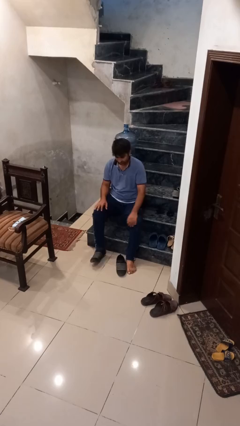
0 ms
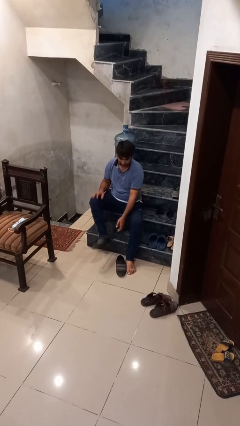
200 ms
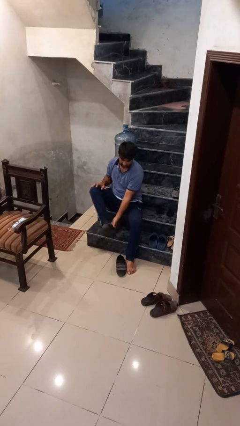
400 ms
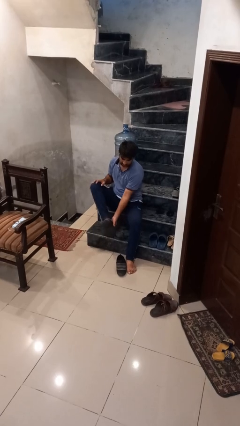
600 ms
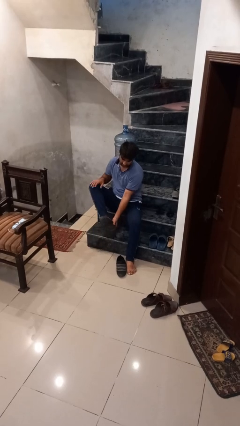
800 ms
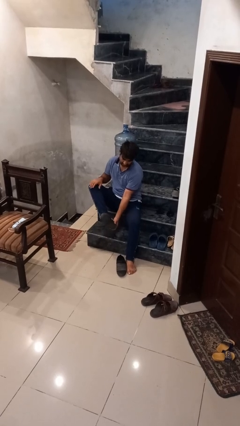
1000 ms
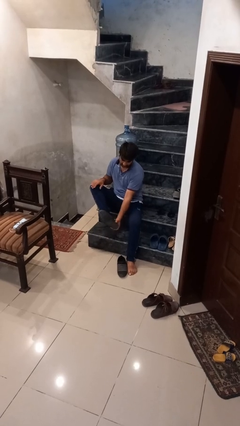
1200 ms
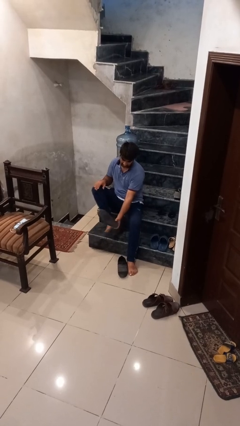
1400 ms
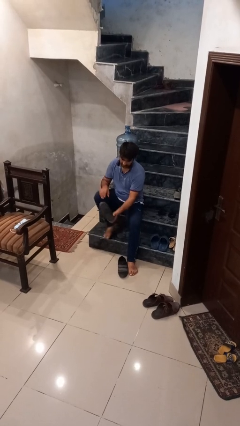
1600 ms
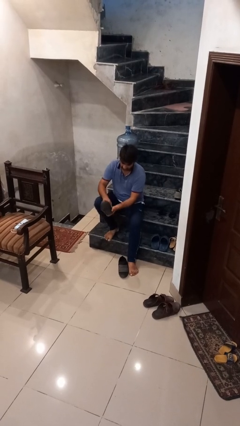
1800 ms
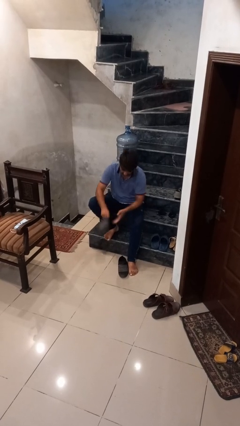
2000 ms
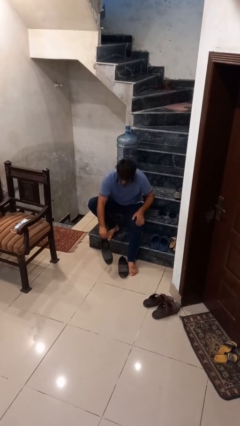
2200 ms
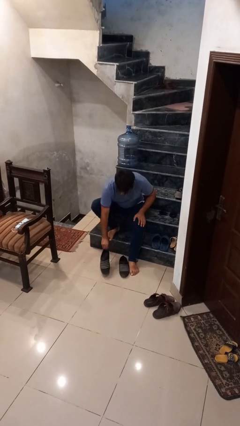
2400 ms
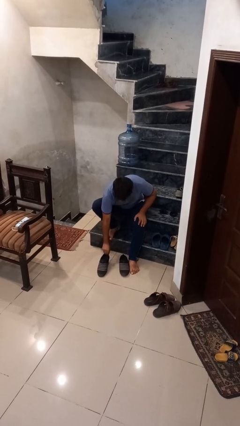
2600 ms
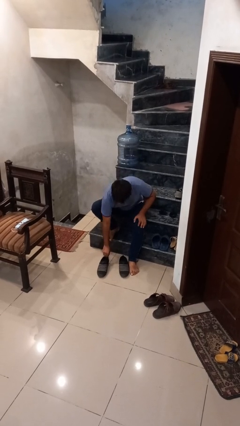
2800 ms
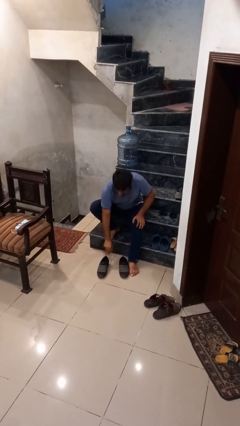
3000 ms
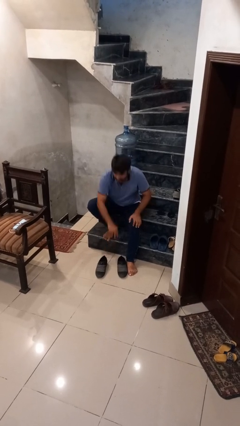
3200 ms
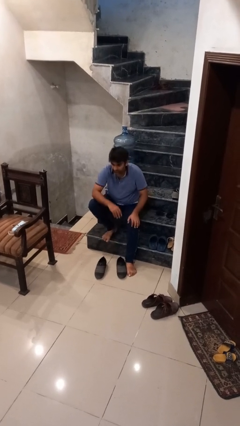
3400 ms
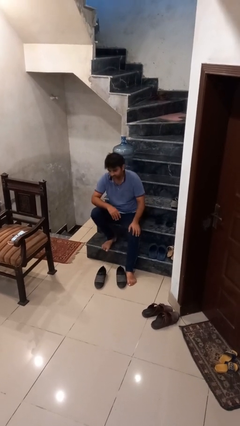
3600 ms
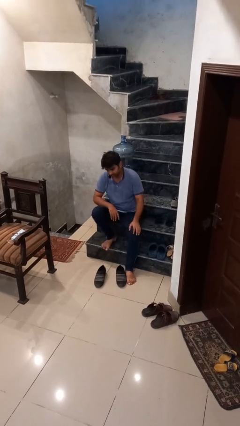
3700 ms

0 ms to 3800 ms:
person takes off shoes

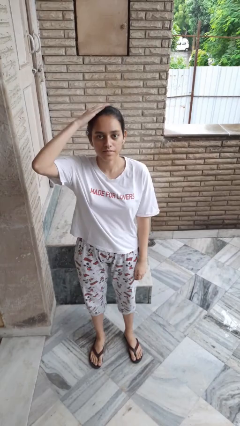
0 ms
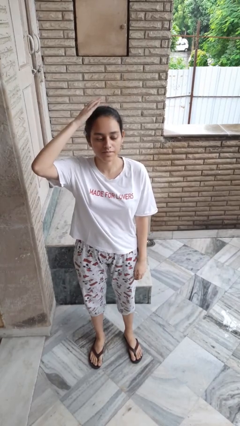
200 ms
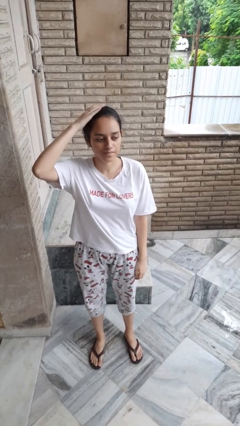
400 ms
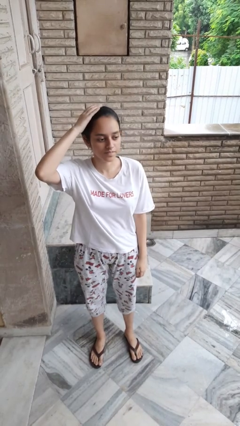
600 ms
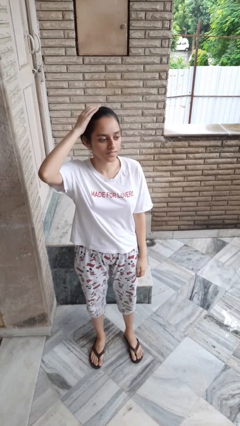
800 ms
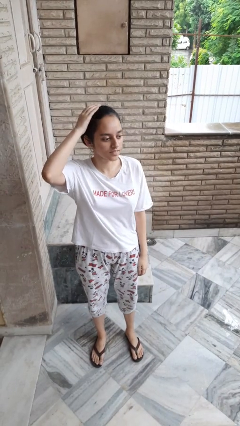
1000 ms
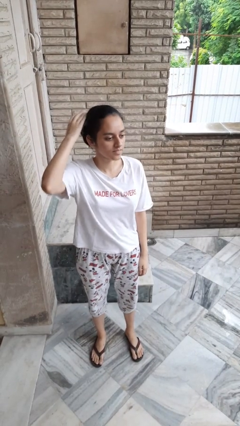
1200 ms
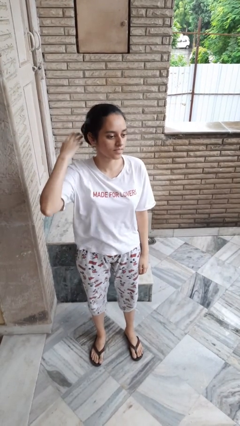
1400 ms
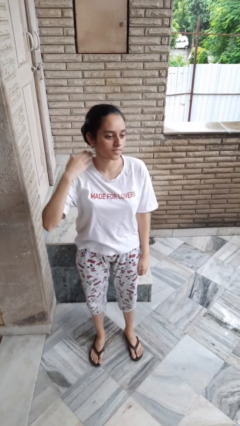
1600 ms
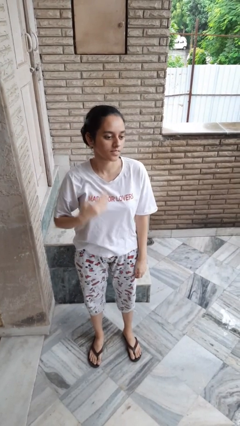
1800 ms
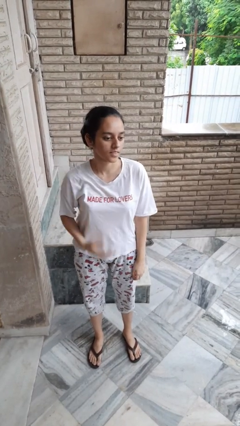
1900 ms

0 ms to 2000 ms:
person pats head

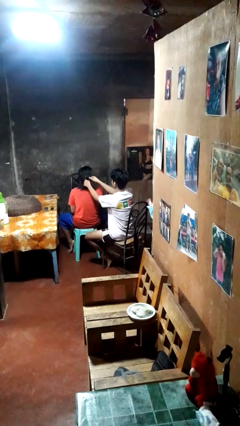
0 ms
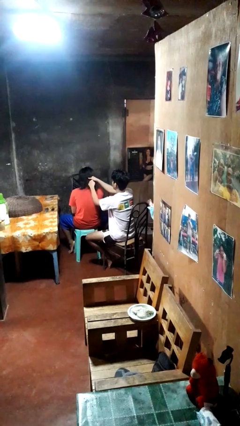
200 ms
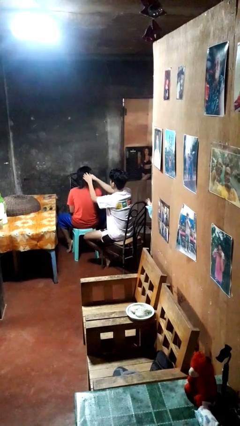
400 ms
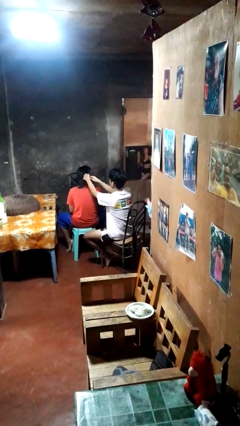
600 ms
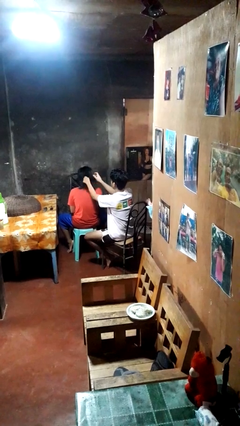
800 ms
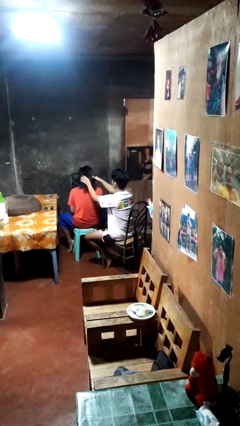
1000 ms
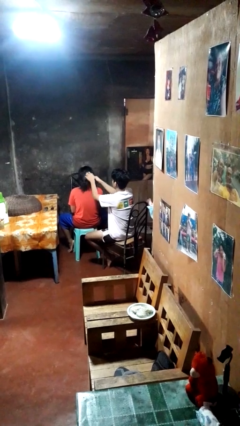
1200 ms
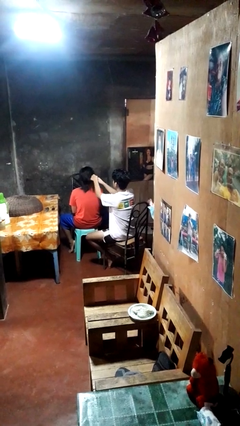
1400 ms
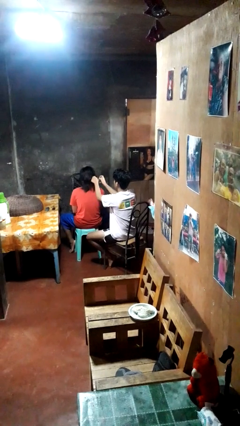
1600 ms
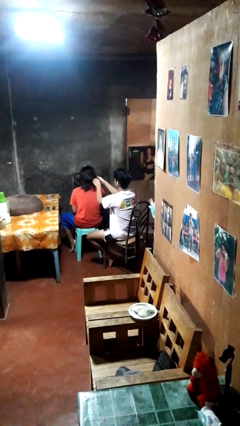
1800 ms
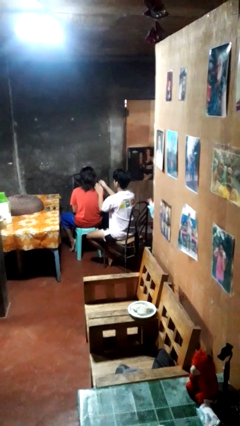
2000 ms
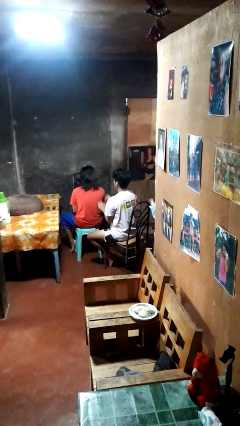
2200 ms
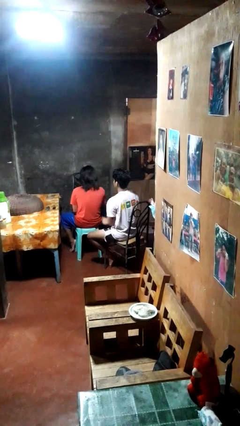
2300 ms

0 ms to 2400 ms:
person braids hair of person

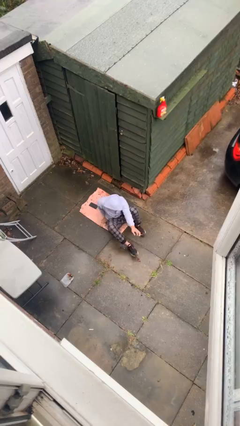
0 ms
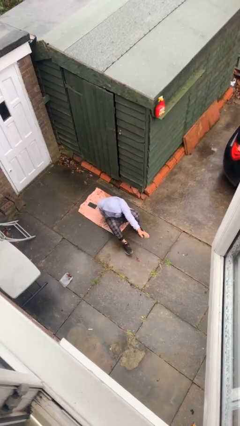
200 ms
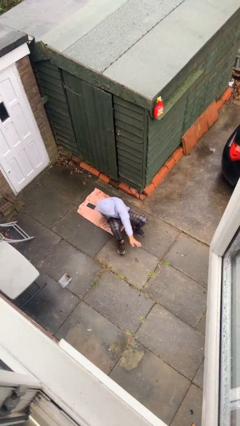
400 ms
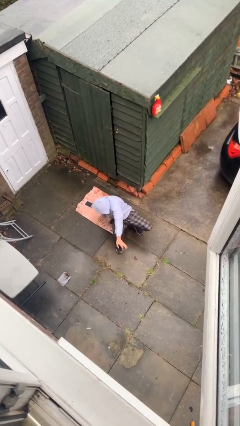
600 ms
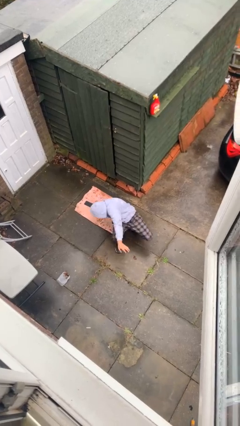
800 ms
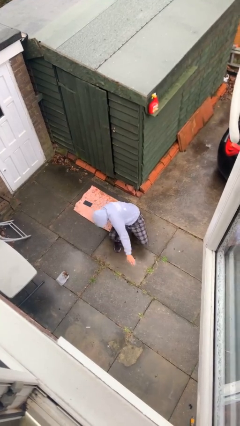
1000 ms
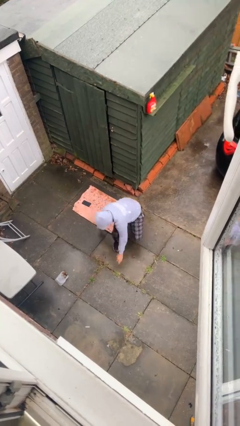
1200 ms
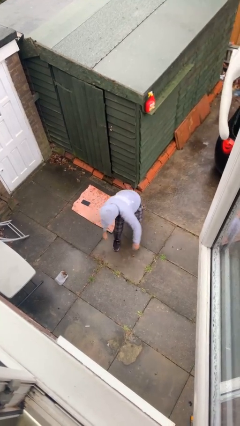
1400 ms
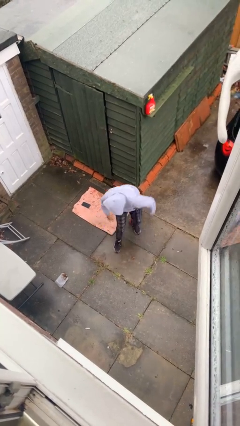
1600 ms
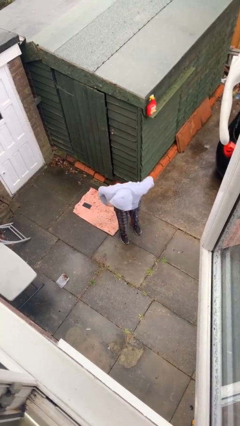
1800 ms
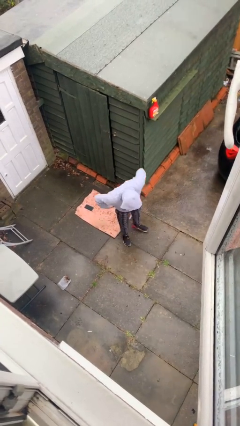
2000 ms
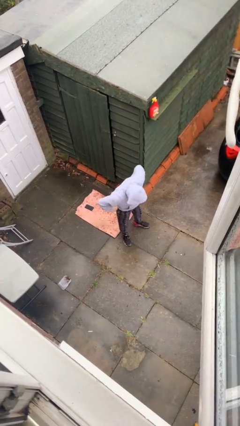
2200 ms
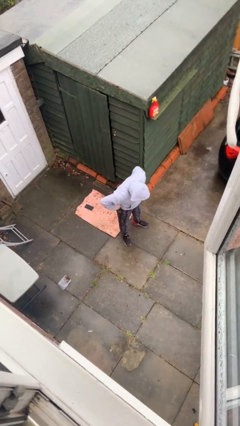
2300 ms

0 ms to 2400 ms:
person stands up

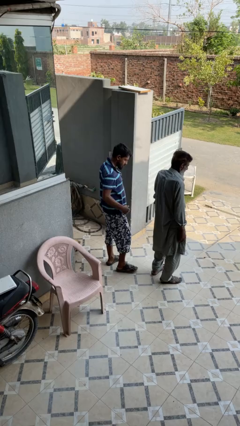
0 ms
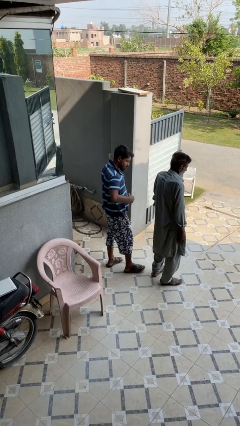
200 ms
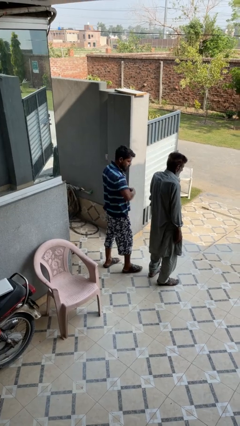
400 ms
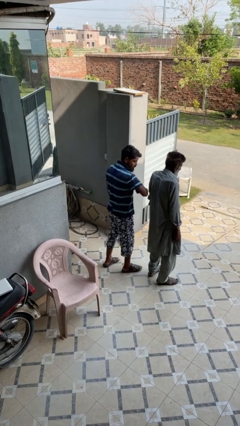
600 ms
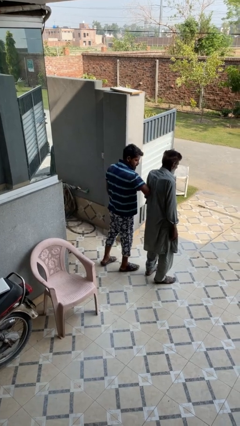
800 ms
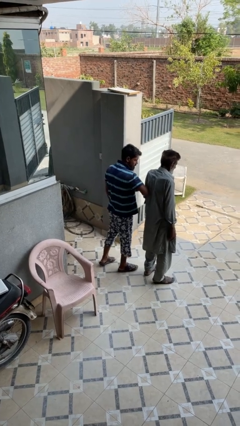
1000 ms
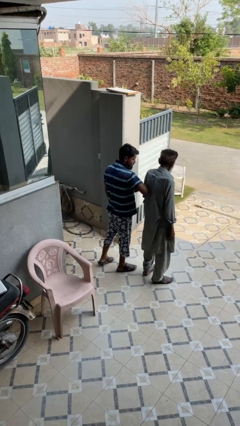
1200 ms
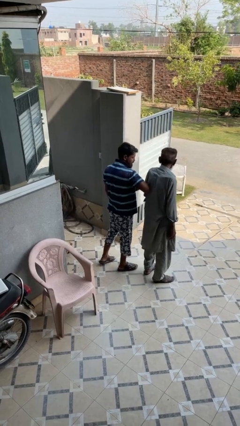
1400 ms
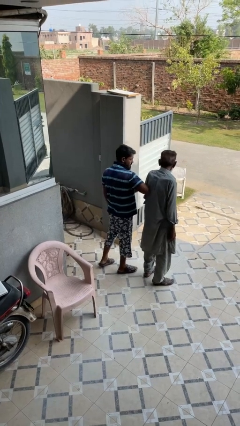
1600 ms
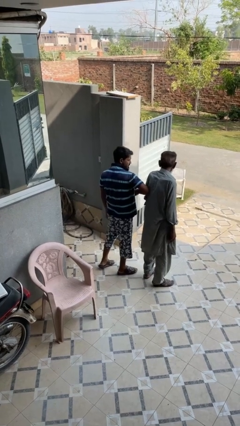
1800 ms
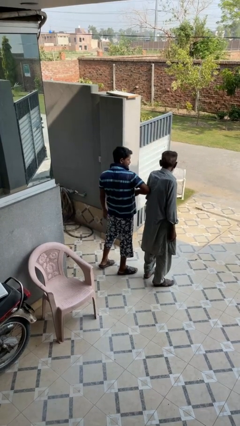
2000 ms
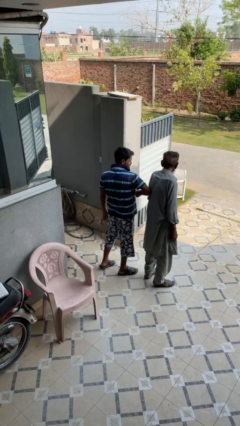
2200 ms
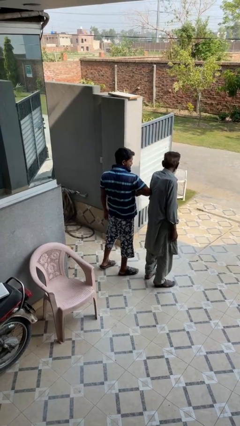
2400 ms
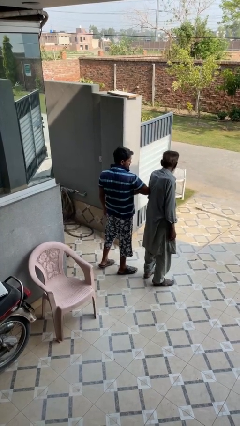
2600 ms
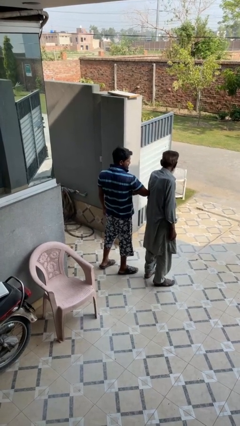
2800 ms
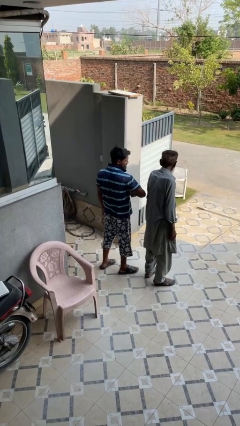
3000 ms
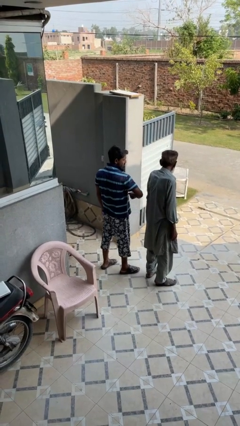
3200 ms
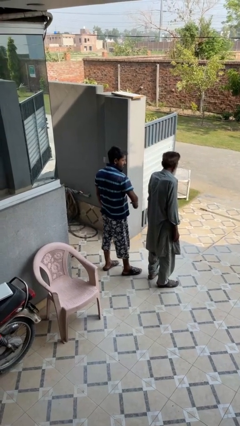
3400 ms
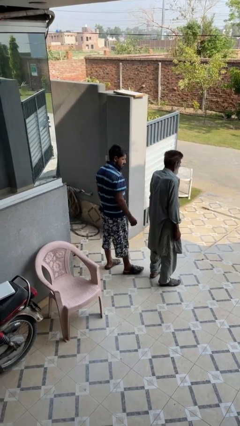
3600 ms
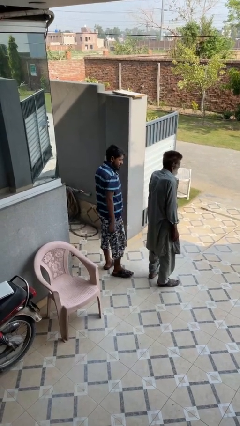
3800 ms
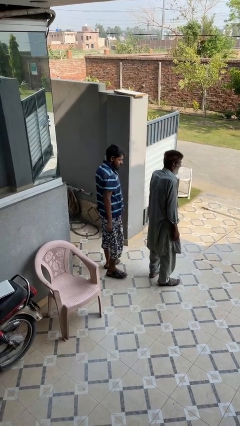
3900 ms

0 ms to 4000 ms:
person nudges person with elbow

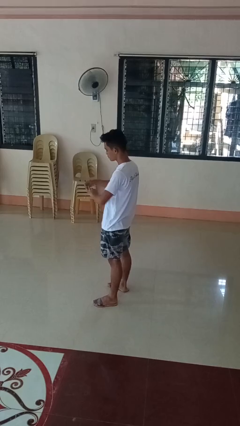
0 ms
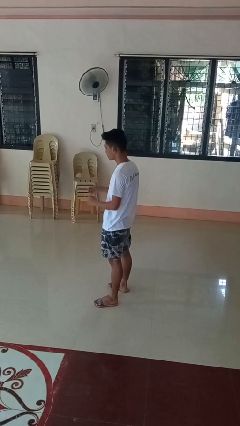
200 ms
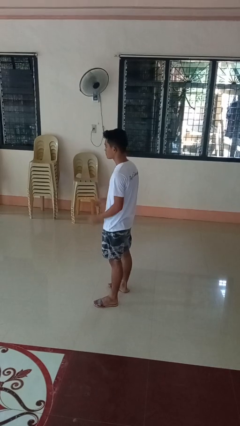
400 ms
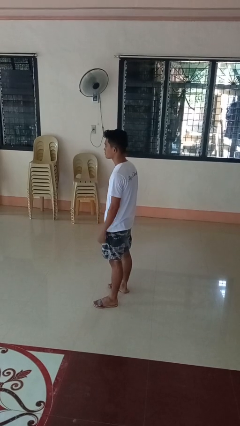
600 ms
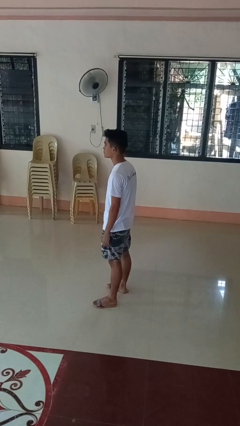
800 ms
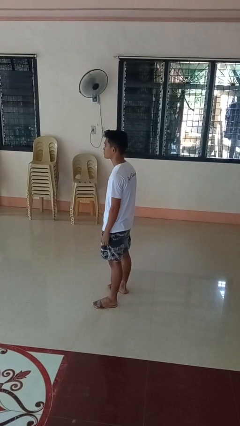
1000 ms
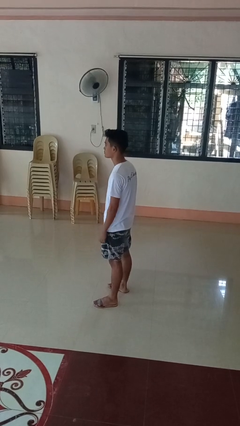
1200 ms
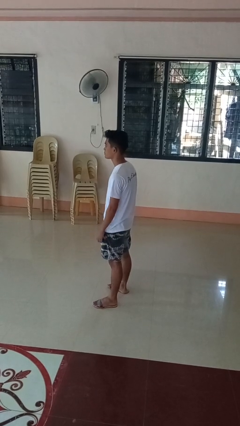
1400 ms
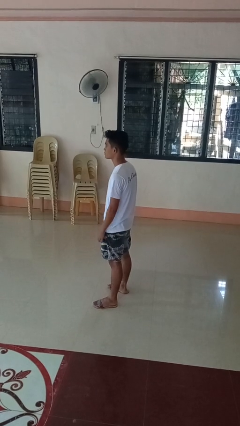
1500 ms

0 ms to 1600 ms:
person takes off ring

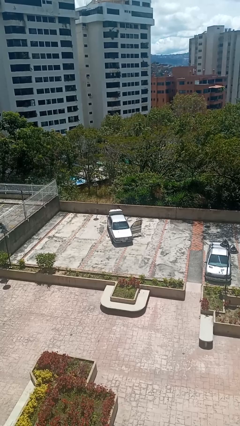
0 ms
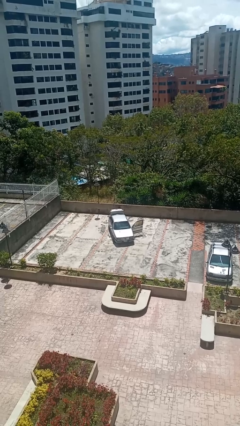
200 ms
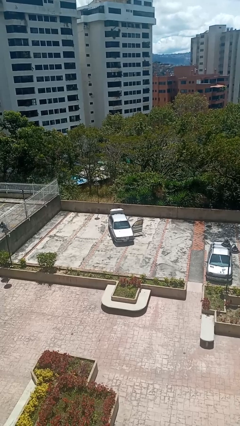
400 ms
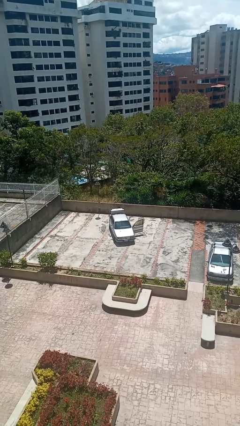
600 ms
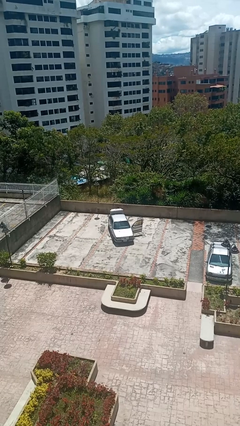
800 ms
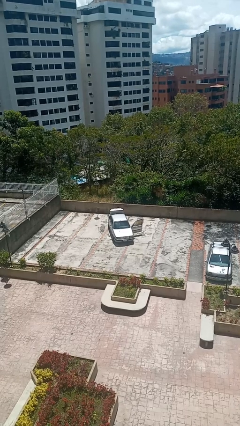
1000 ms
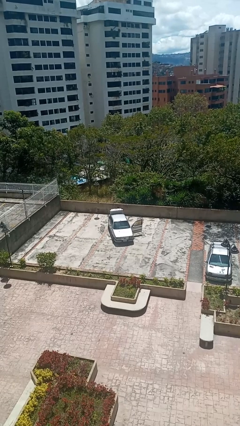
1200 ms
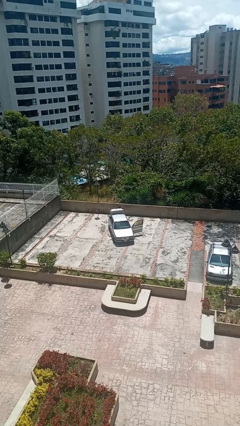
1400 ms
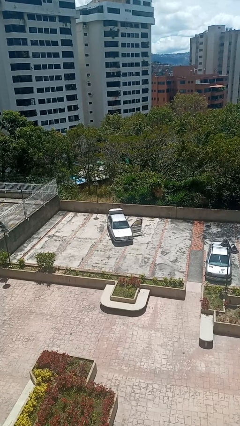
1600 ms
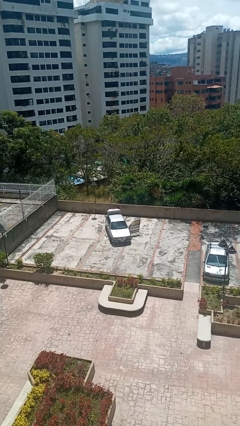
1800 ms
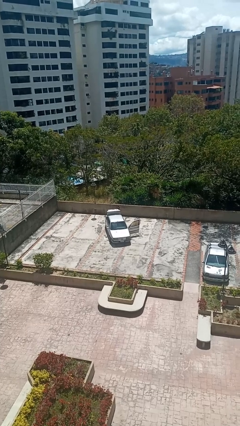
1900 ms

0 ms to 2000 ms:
person loads car
